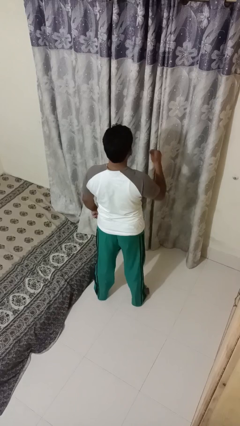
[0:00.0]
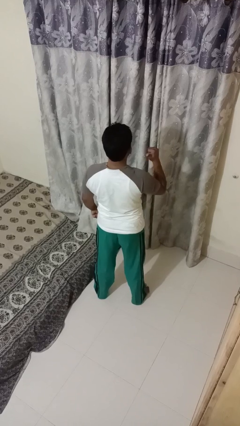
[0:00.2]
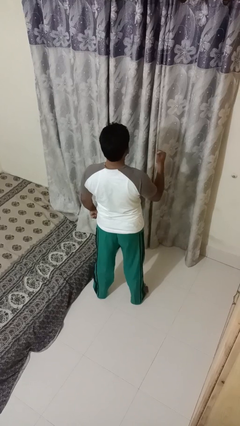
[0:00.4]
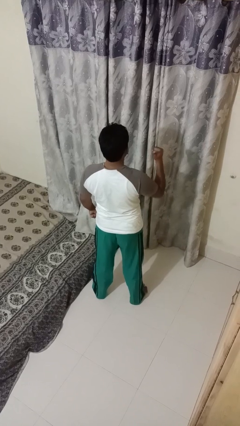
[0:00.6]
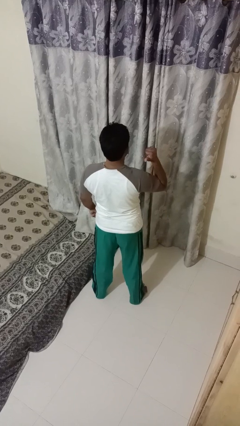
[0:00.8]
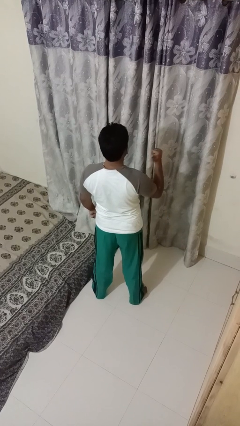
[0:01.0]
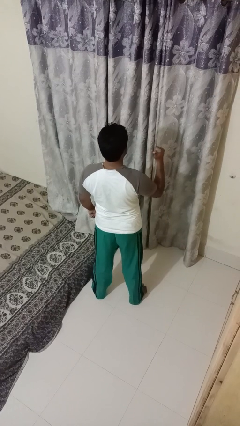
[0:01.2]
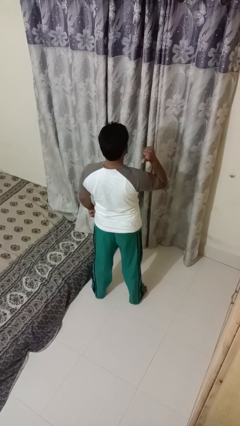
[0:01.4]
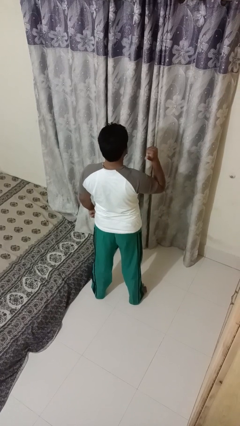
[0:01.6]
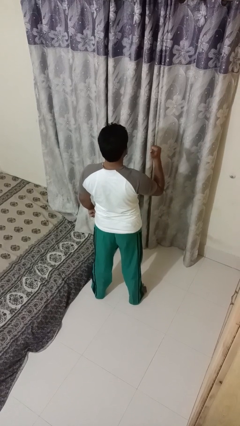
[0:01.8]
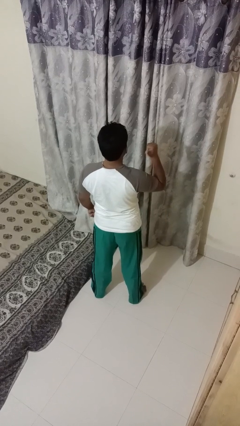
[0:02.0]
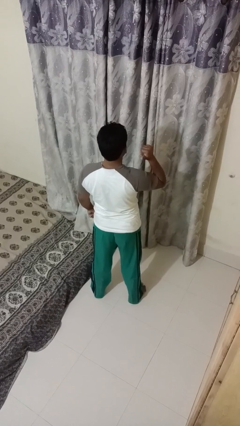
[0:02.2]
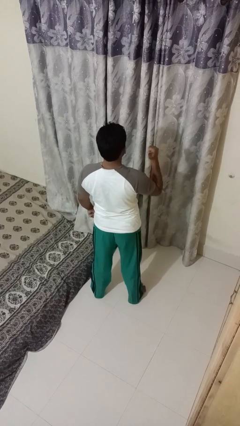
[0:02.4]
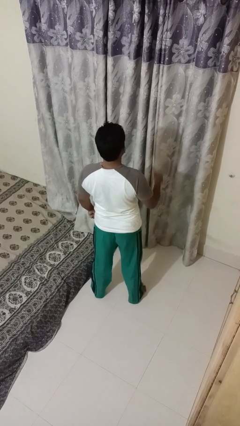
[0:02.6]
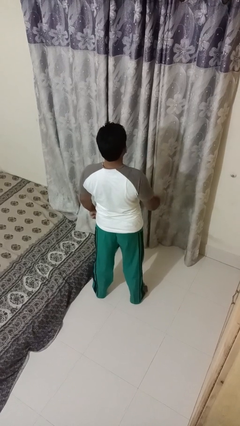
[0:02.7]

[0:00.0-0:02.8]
person gestures behind me

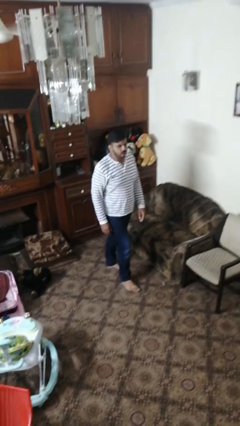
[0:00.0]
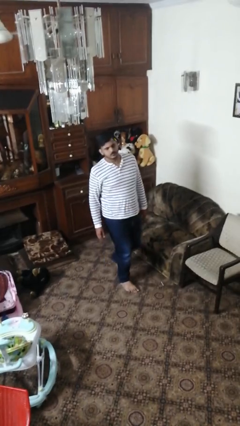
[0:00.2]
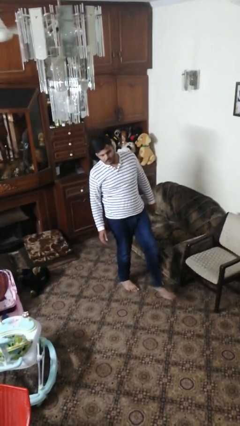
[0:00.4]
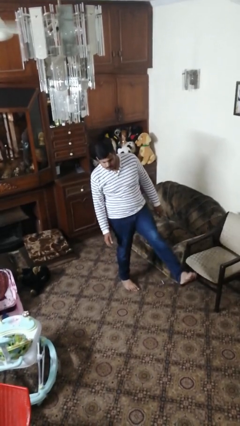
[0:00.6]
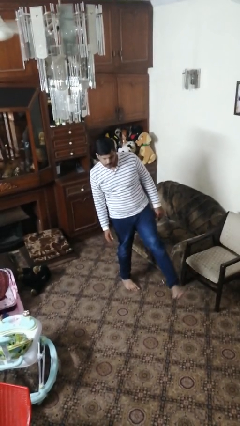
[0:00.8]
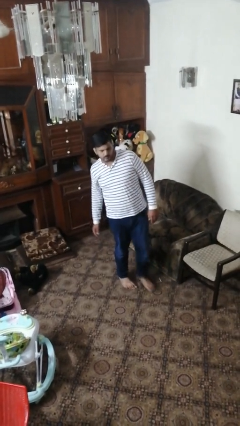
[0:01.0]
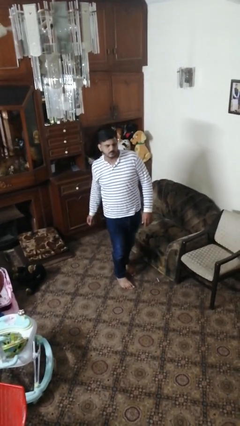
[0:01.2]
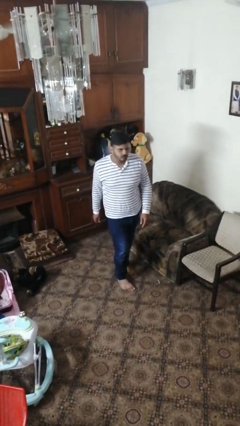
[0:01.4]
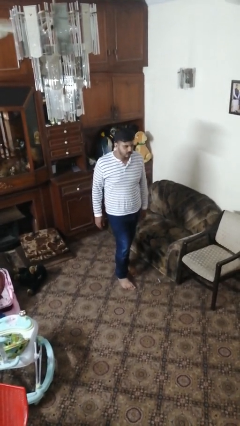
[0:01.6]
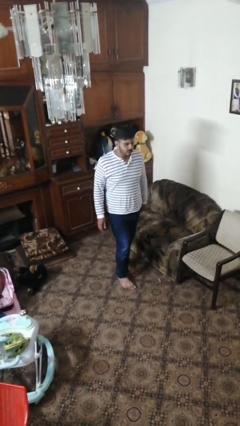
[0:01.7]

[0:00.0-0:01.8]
person karate kicks

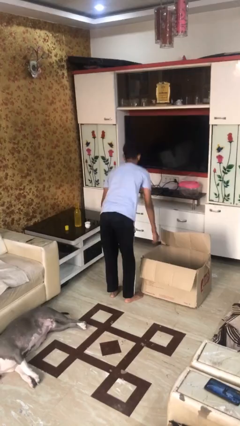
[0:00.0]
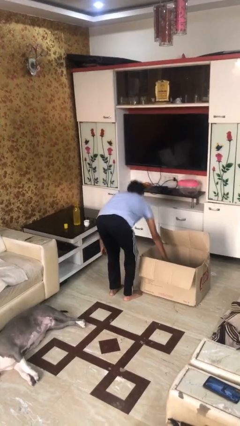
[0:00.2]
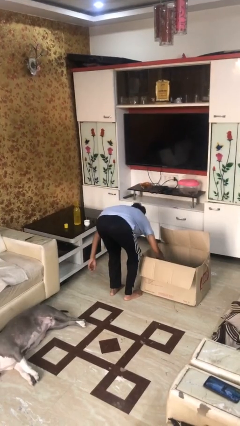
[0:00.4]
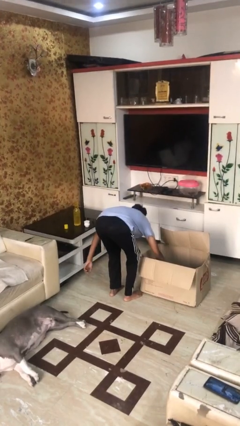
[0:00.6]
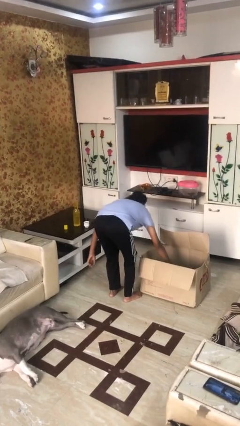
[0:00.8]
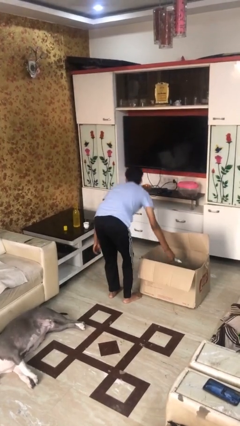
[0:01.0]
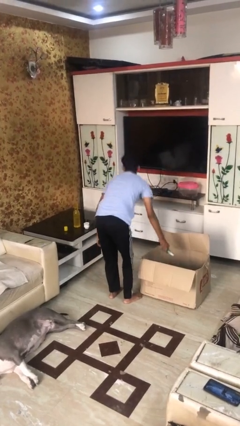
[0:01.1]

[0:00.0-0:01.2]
person takes object from box

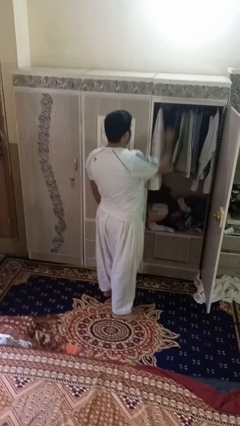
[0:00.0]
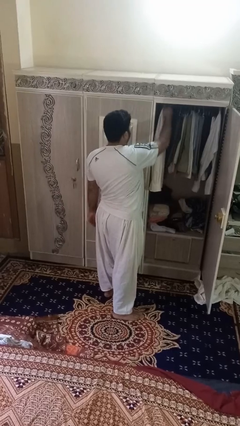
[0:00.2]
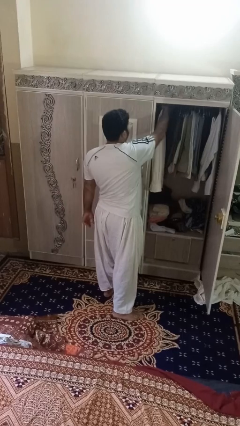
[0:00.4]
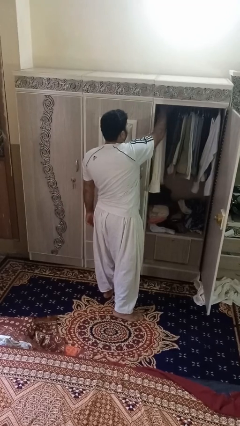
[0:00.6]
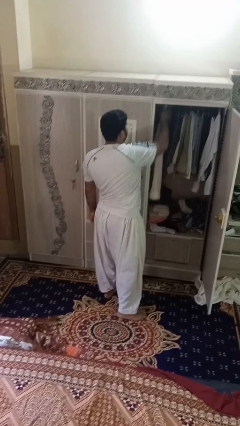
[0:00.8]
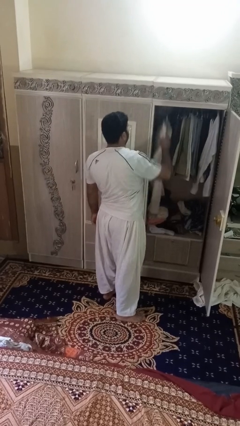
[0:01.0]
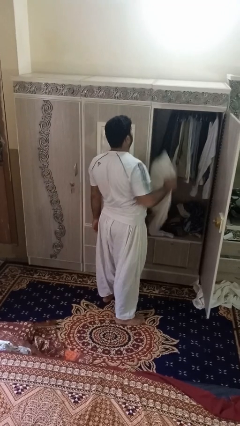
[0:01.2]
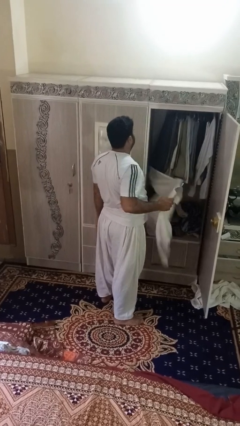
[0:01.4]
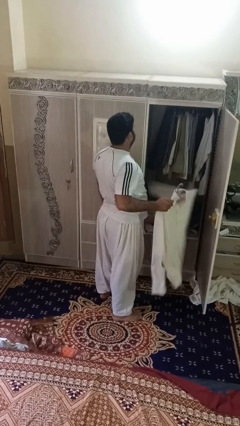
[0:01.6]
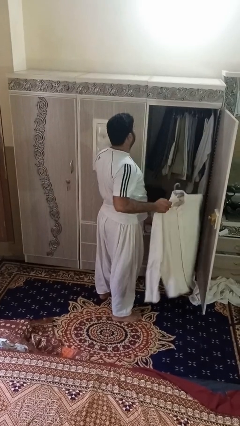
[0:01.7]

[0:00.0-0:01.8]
person takes clothes from closet

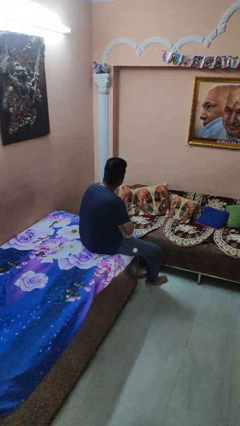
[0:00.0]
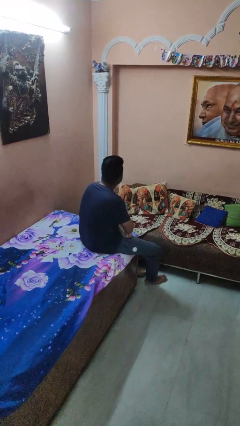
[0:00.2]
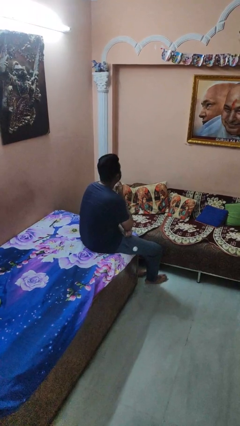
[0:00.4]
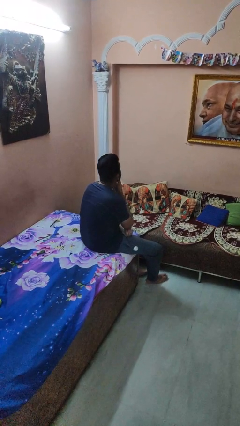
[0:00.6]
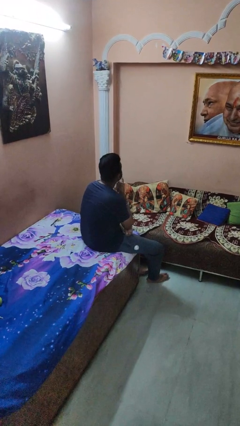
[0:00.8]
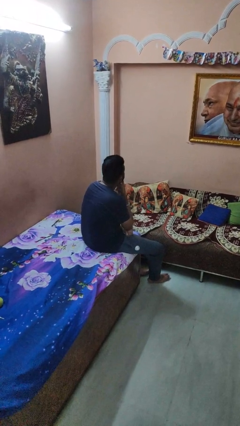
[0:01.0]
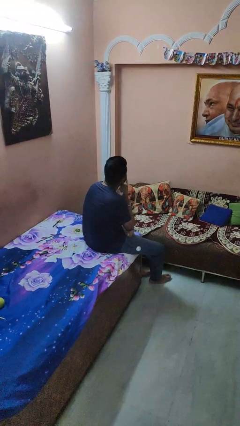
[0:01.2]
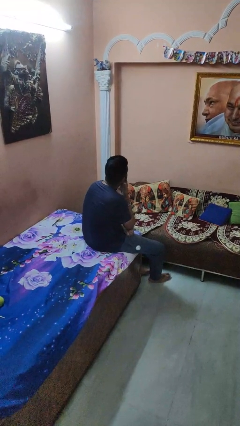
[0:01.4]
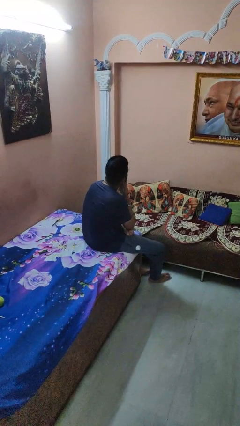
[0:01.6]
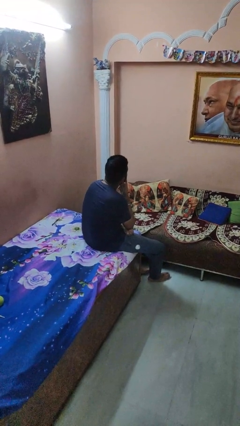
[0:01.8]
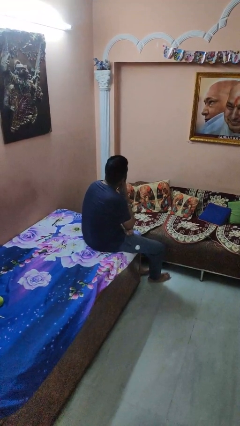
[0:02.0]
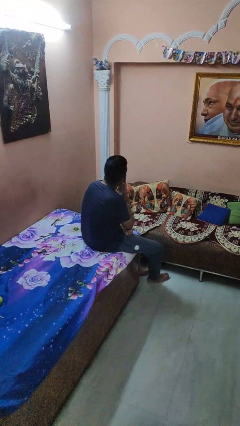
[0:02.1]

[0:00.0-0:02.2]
person strokes chin

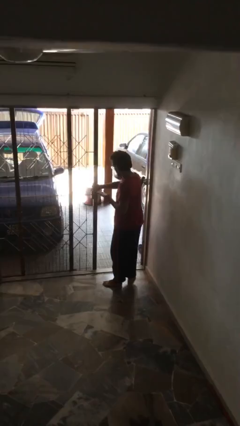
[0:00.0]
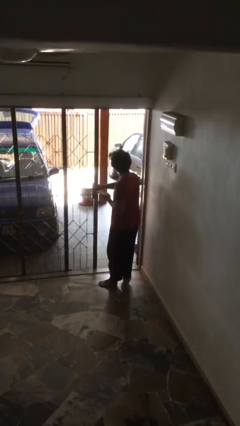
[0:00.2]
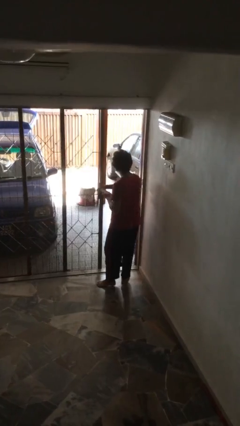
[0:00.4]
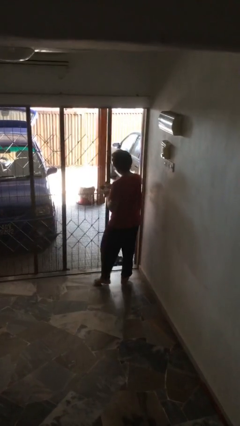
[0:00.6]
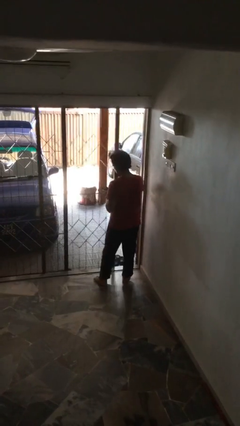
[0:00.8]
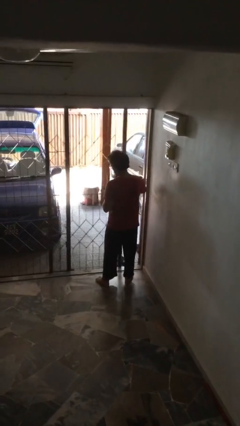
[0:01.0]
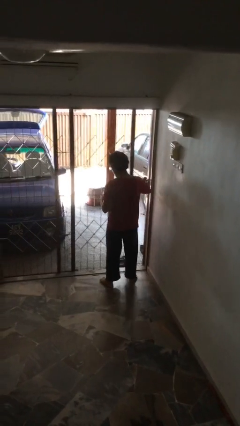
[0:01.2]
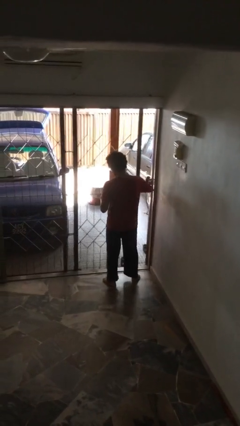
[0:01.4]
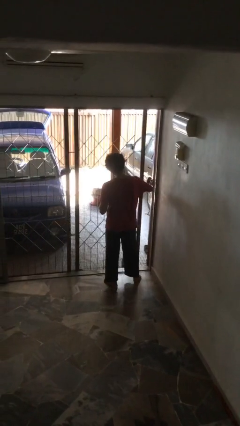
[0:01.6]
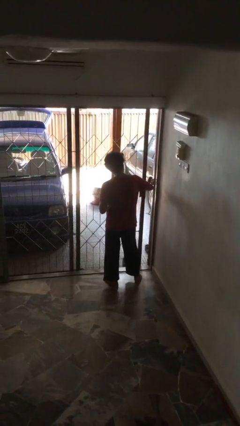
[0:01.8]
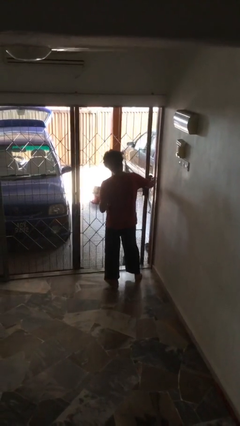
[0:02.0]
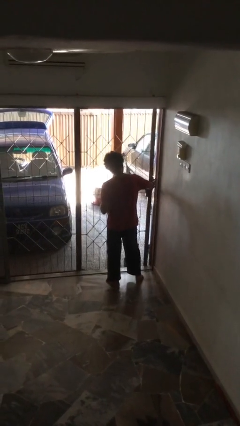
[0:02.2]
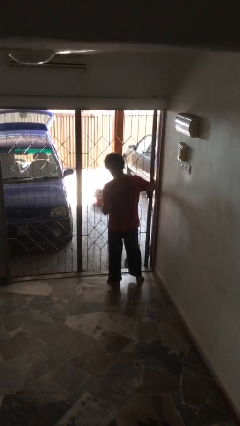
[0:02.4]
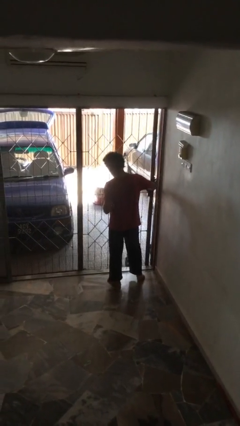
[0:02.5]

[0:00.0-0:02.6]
person closes facility door

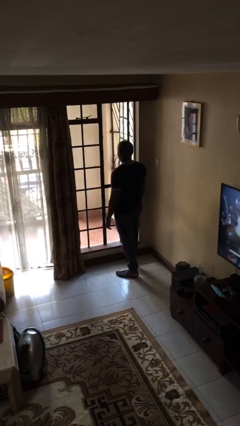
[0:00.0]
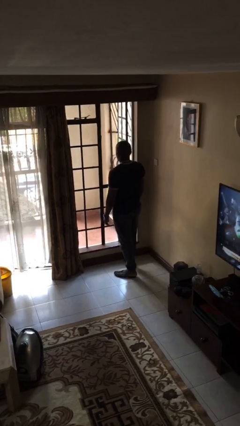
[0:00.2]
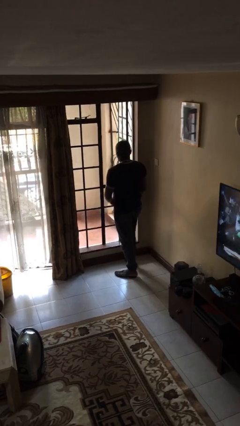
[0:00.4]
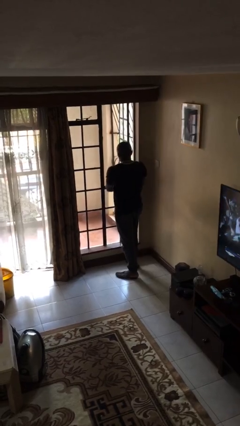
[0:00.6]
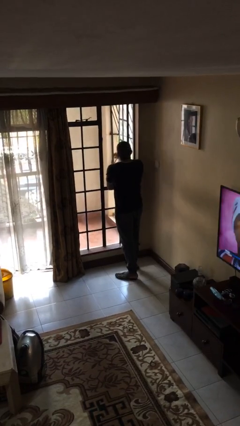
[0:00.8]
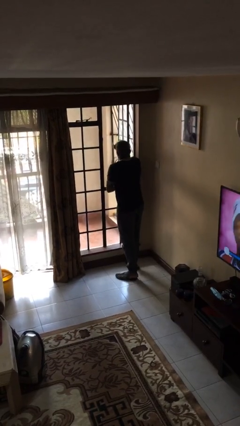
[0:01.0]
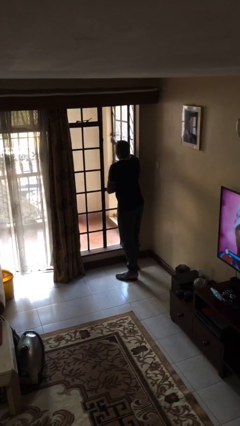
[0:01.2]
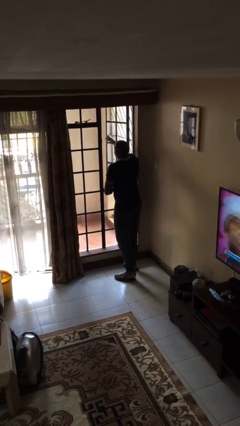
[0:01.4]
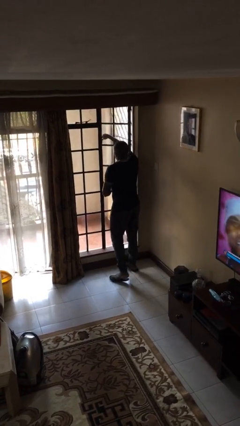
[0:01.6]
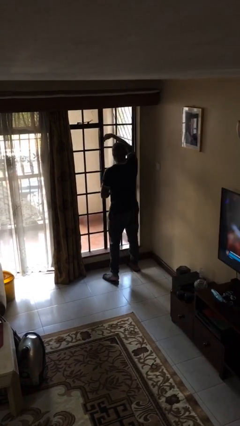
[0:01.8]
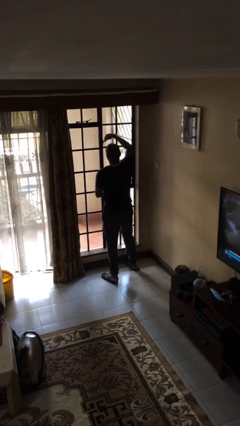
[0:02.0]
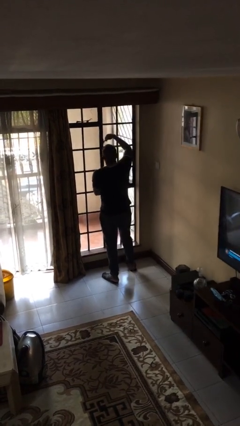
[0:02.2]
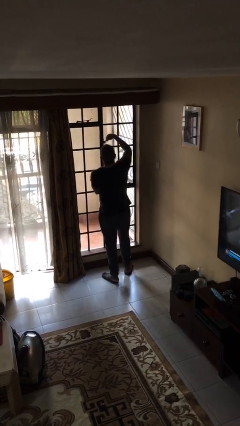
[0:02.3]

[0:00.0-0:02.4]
person closes home window

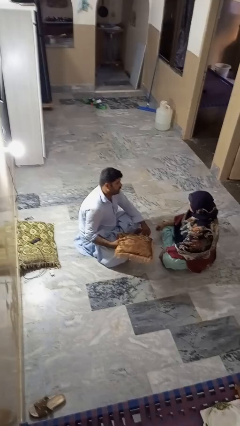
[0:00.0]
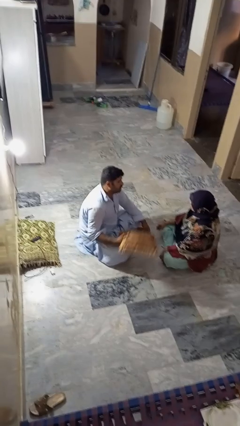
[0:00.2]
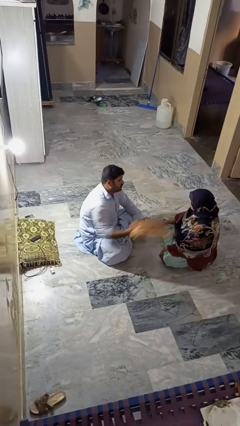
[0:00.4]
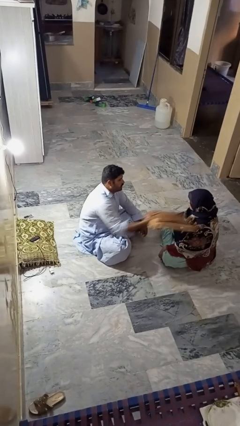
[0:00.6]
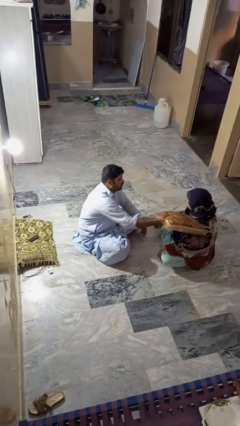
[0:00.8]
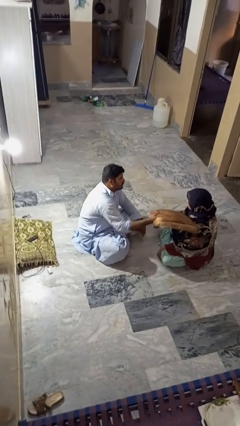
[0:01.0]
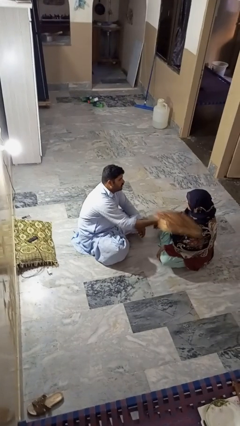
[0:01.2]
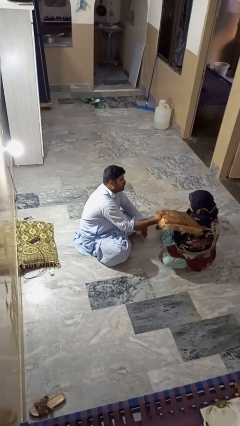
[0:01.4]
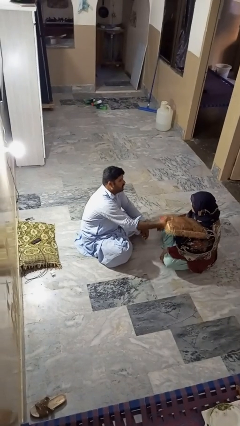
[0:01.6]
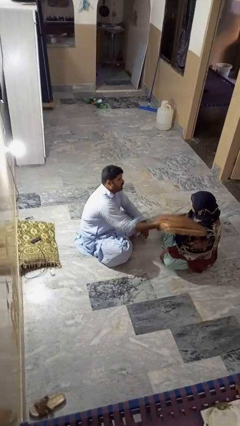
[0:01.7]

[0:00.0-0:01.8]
person hits person with pillow
